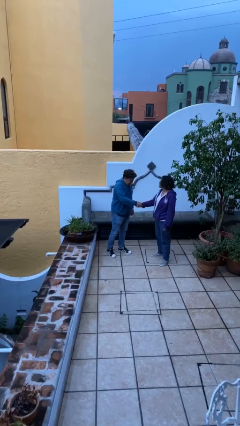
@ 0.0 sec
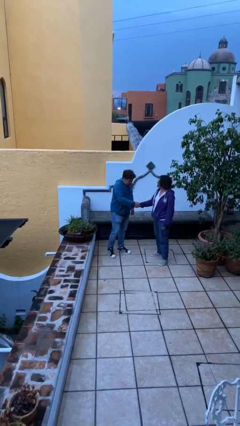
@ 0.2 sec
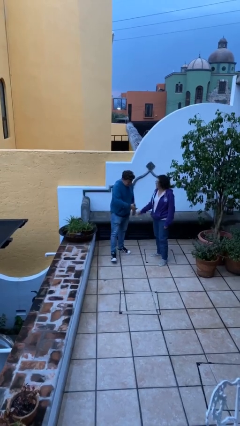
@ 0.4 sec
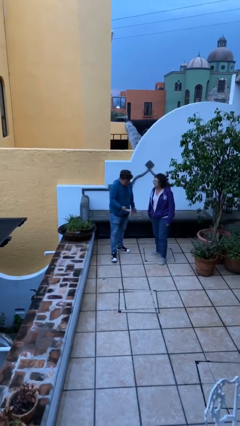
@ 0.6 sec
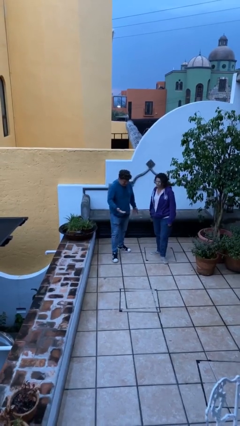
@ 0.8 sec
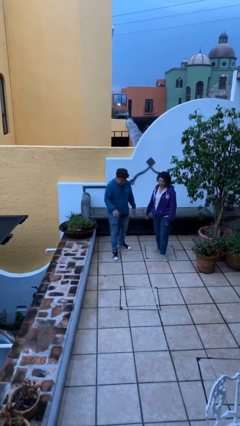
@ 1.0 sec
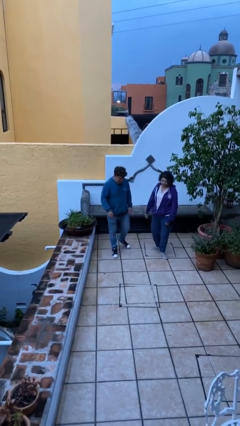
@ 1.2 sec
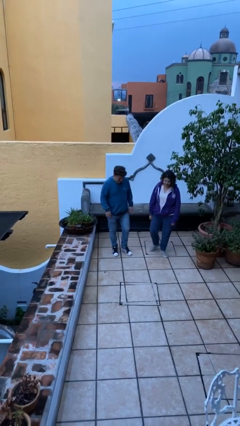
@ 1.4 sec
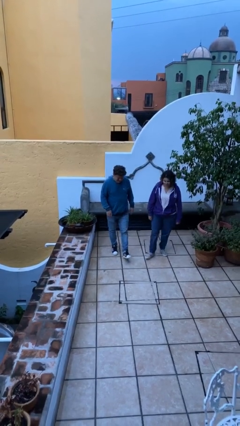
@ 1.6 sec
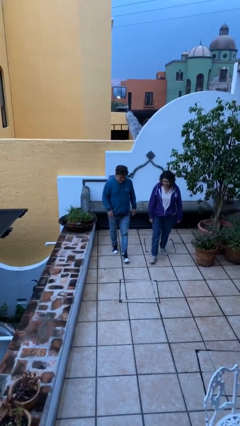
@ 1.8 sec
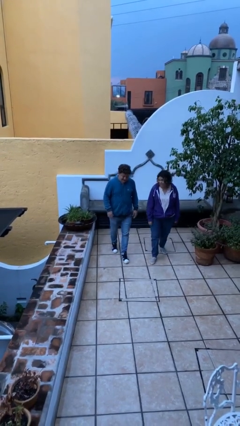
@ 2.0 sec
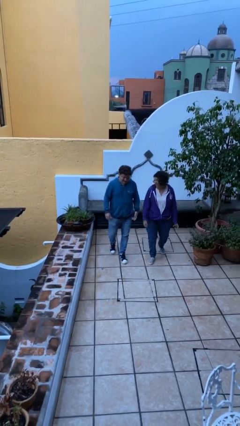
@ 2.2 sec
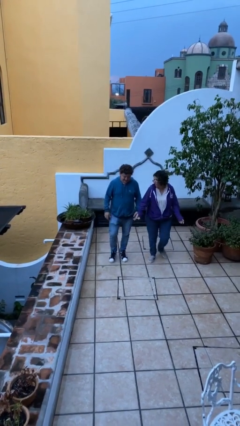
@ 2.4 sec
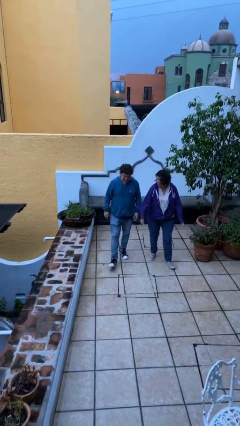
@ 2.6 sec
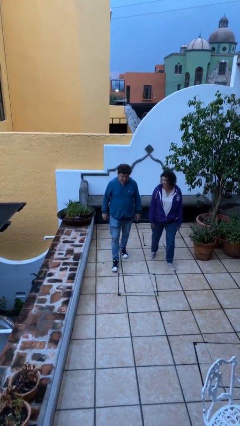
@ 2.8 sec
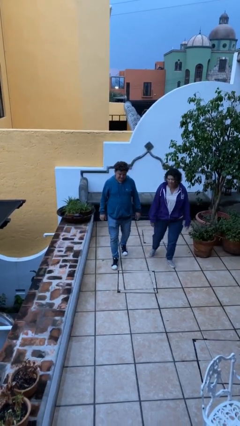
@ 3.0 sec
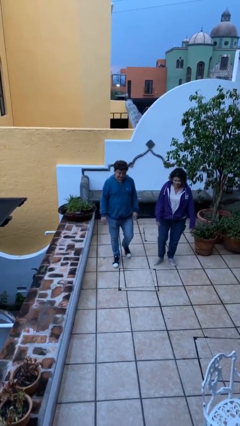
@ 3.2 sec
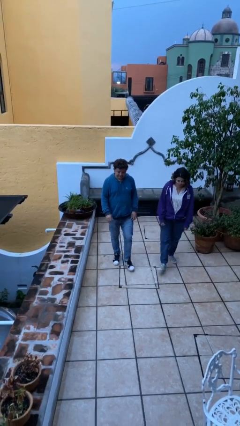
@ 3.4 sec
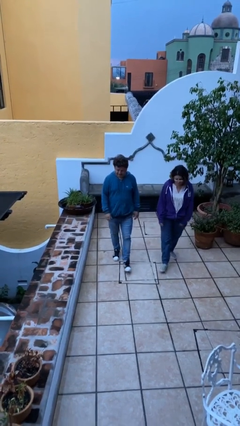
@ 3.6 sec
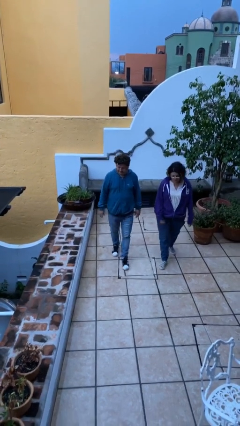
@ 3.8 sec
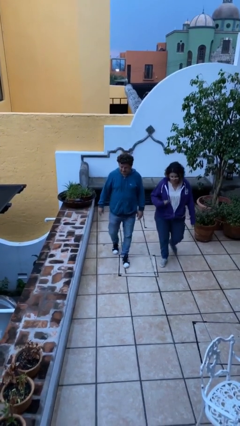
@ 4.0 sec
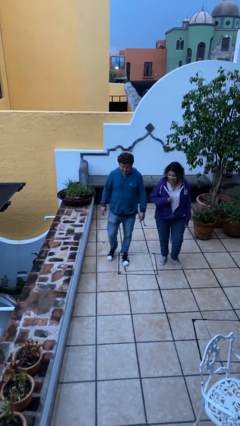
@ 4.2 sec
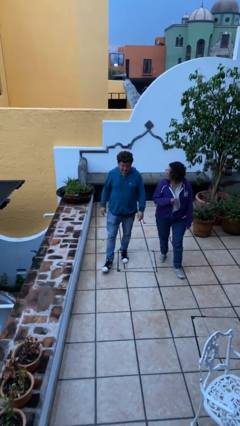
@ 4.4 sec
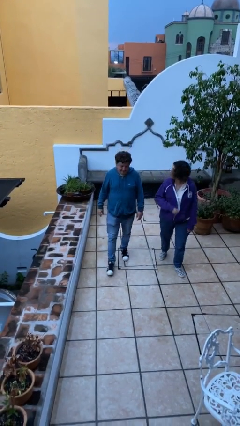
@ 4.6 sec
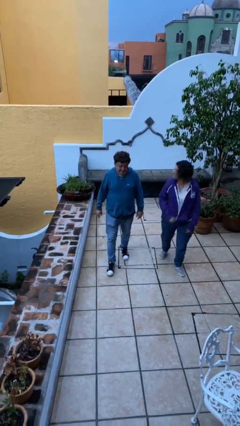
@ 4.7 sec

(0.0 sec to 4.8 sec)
person talks to person

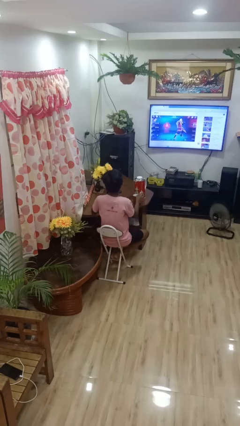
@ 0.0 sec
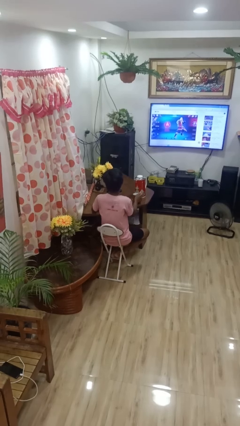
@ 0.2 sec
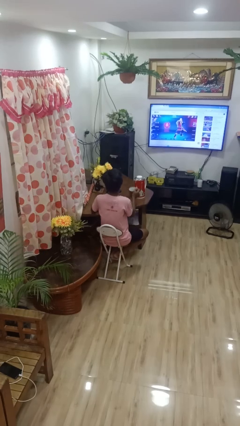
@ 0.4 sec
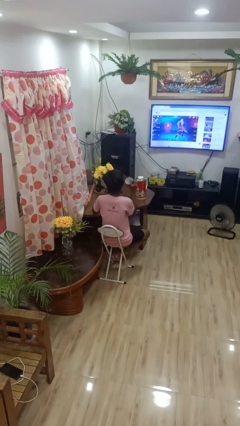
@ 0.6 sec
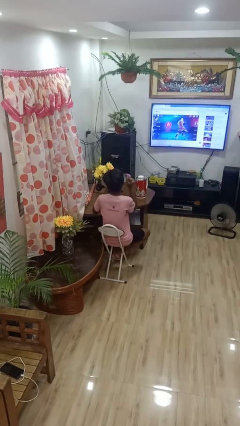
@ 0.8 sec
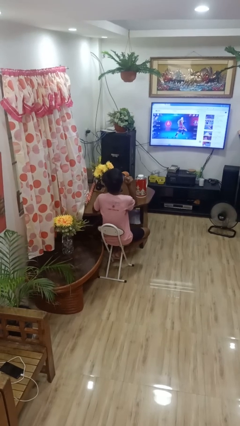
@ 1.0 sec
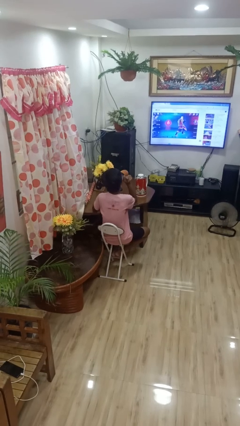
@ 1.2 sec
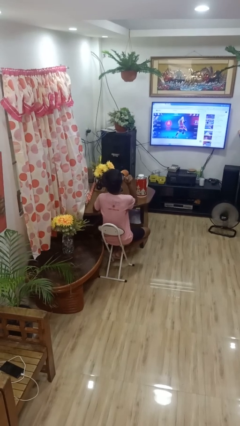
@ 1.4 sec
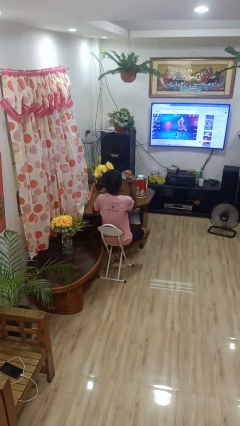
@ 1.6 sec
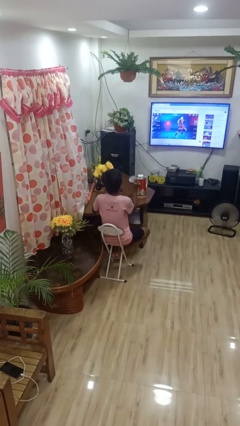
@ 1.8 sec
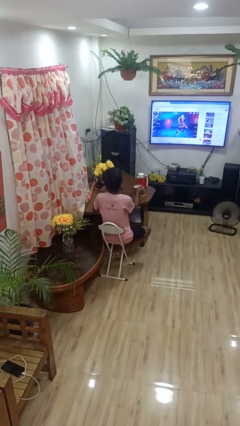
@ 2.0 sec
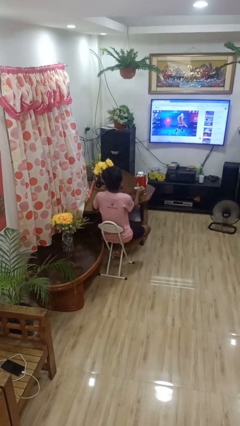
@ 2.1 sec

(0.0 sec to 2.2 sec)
person drinks from mug

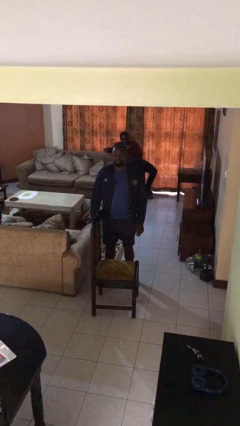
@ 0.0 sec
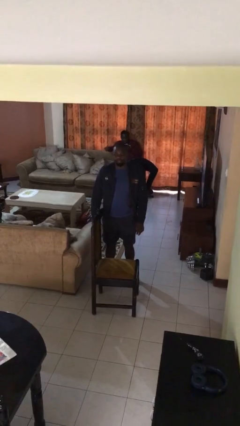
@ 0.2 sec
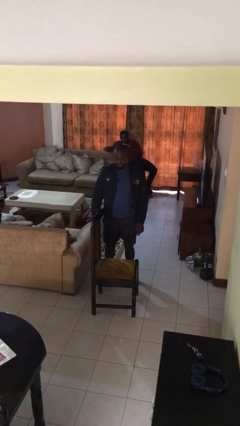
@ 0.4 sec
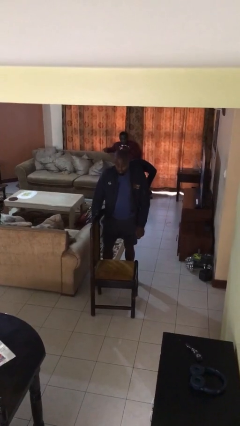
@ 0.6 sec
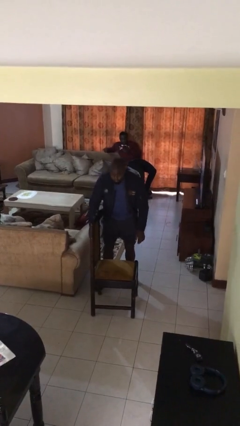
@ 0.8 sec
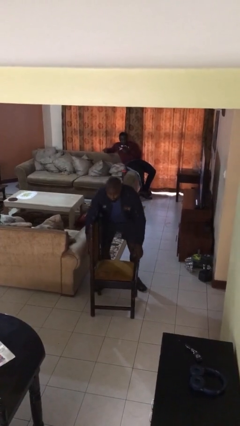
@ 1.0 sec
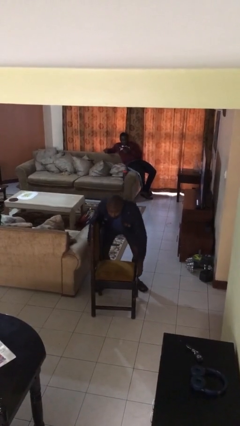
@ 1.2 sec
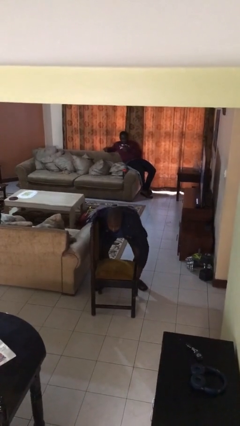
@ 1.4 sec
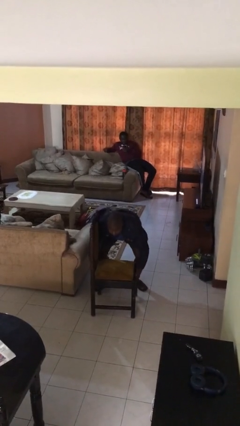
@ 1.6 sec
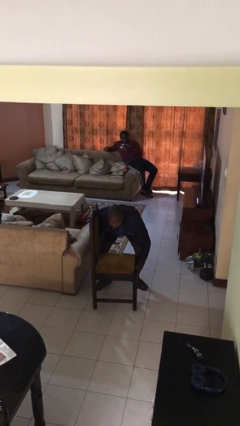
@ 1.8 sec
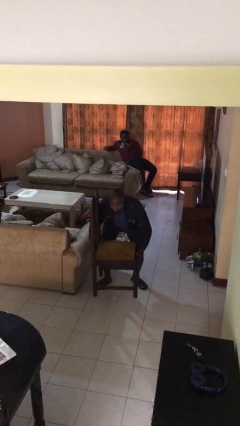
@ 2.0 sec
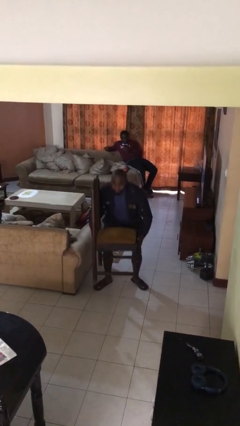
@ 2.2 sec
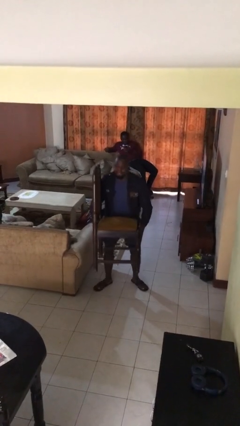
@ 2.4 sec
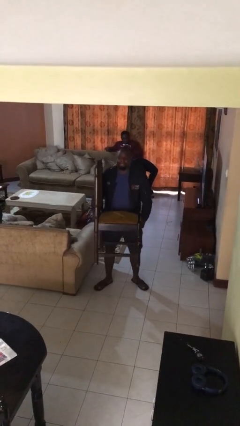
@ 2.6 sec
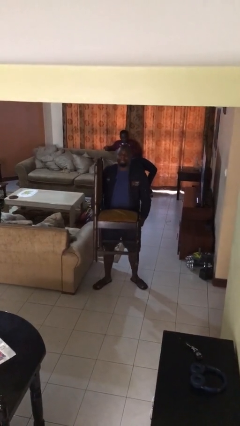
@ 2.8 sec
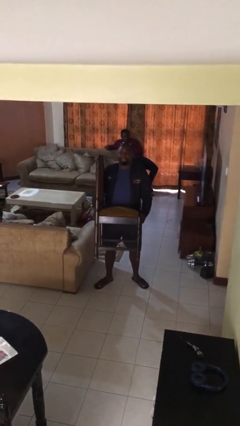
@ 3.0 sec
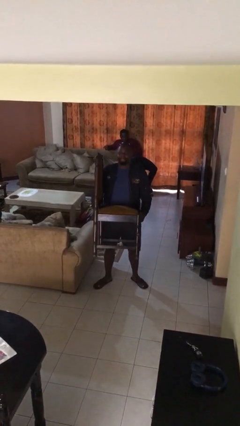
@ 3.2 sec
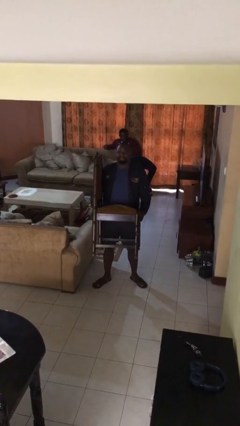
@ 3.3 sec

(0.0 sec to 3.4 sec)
person picks up object from floor

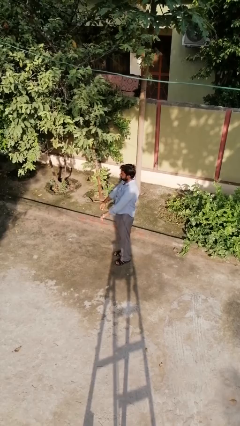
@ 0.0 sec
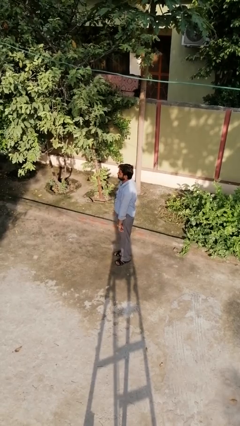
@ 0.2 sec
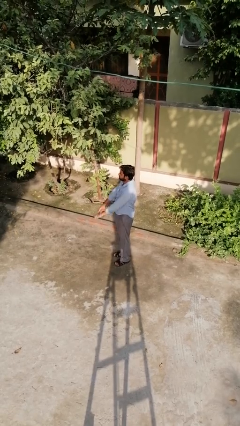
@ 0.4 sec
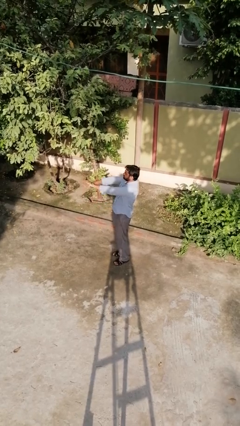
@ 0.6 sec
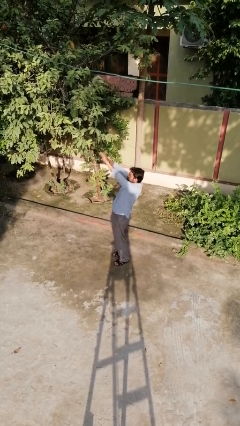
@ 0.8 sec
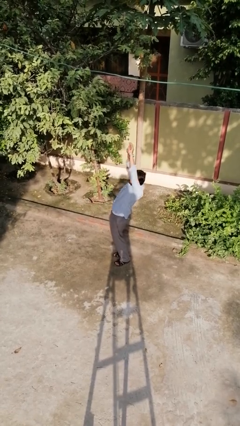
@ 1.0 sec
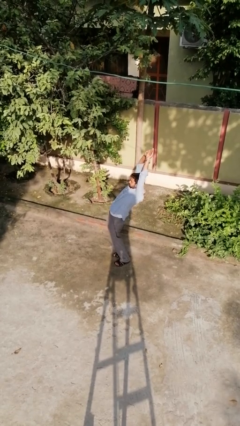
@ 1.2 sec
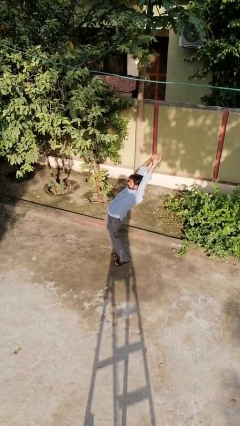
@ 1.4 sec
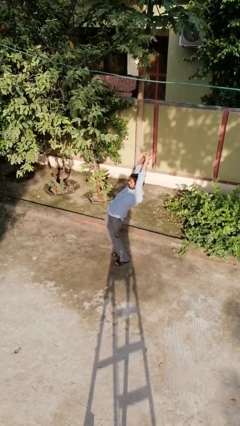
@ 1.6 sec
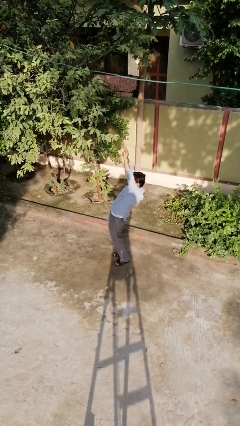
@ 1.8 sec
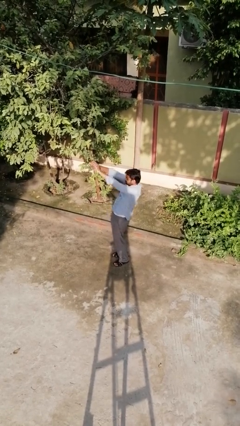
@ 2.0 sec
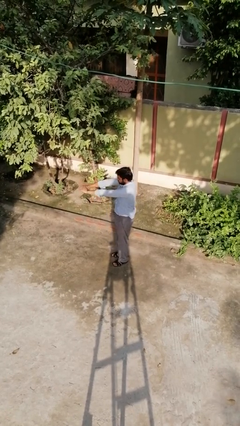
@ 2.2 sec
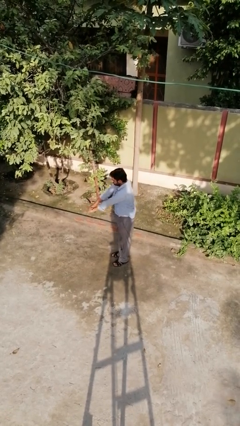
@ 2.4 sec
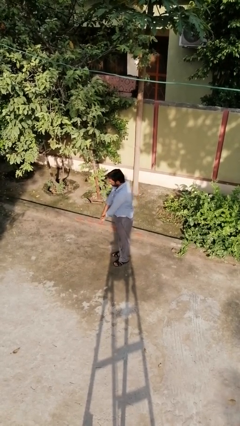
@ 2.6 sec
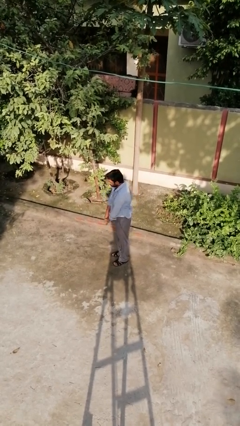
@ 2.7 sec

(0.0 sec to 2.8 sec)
person stretches arms over head

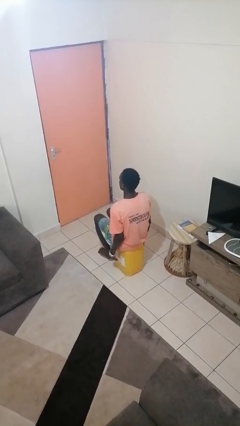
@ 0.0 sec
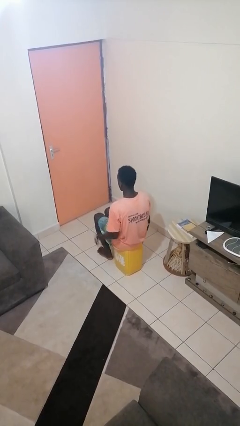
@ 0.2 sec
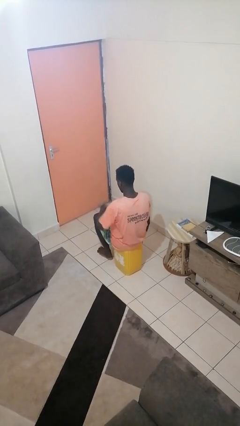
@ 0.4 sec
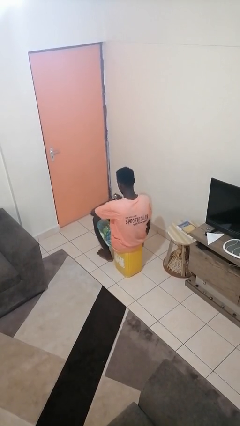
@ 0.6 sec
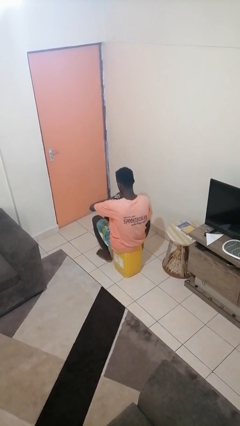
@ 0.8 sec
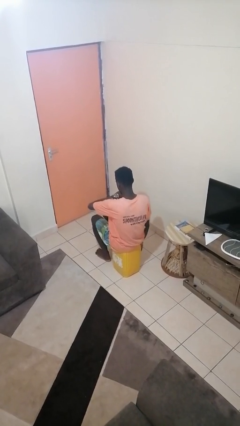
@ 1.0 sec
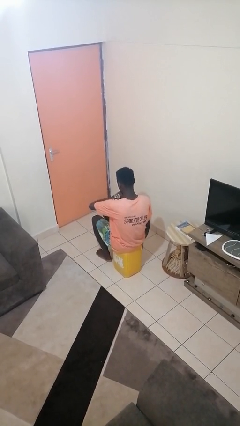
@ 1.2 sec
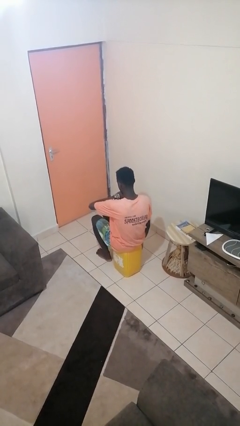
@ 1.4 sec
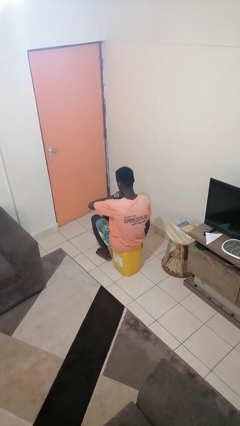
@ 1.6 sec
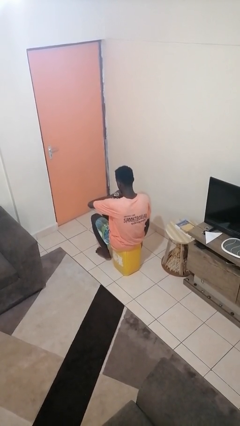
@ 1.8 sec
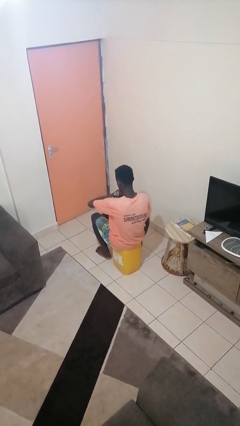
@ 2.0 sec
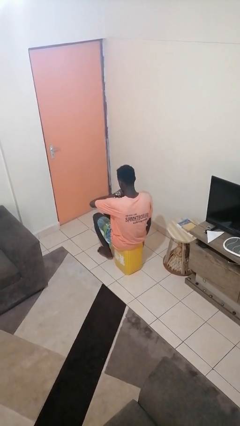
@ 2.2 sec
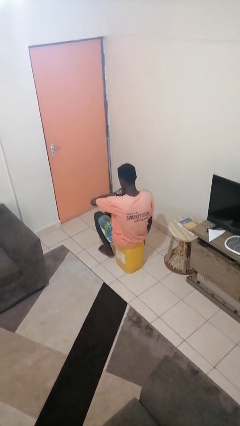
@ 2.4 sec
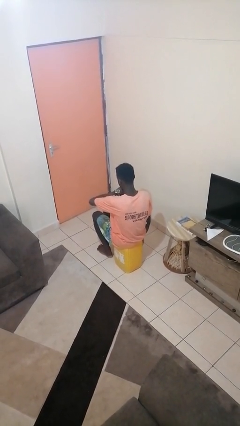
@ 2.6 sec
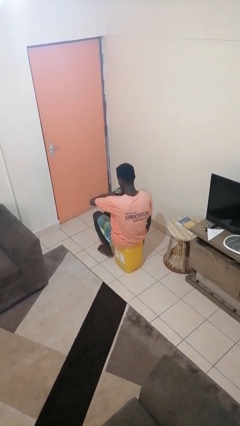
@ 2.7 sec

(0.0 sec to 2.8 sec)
person looks at wristwatch

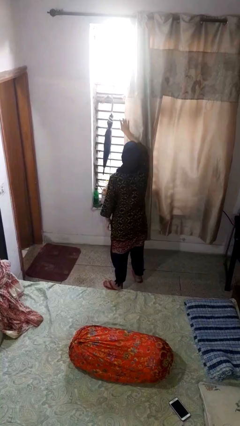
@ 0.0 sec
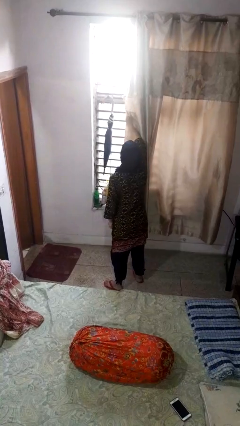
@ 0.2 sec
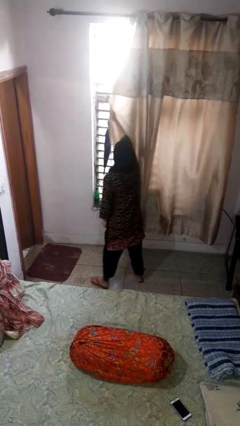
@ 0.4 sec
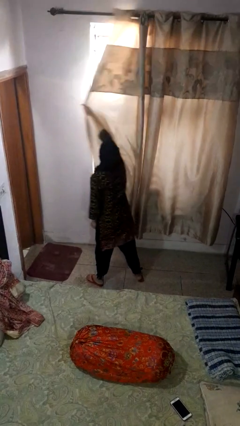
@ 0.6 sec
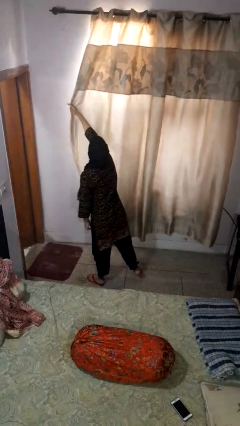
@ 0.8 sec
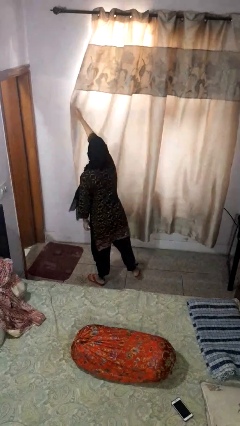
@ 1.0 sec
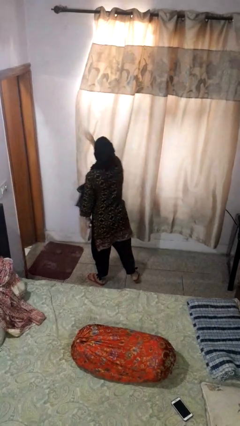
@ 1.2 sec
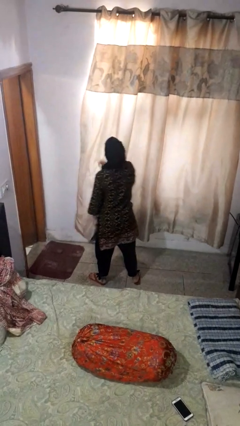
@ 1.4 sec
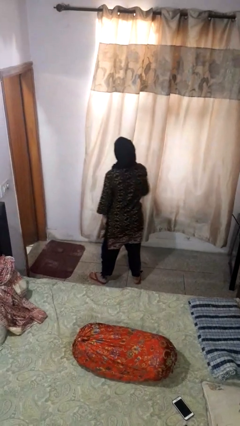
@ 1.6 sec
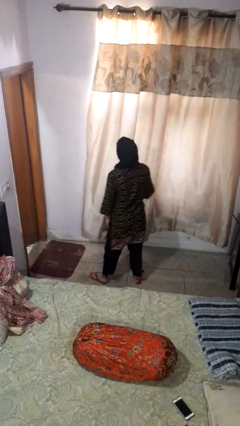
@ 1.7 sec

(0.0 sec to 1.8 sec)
person closes curtains
